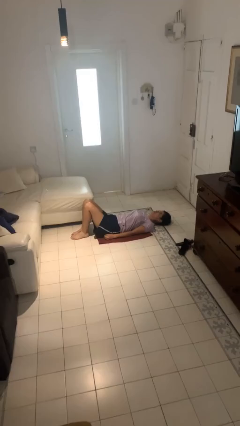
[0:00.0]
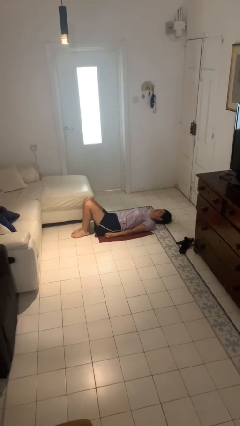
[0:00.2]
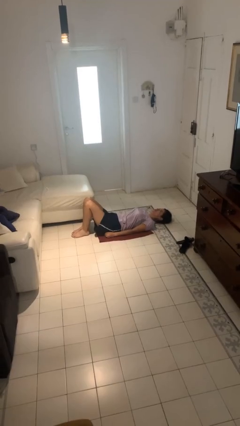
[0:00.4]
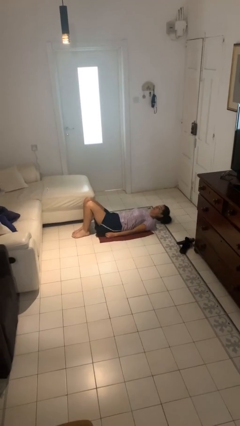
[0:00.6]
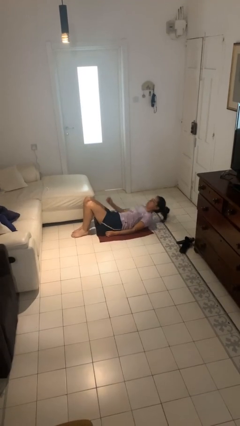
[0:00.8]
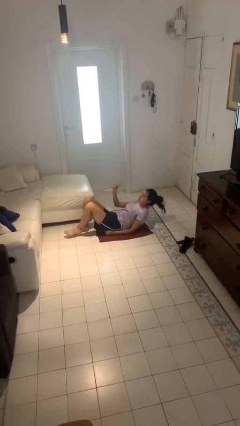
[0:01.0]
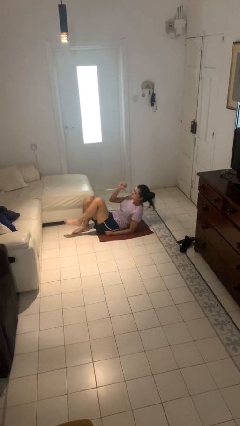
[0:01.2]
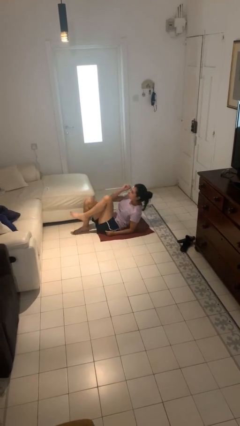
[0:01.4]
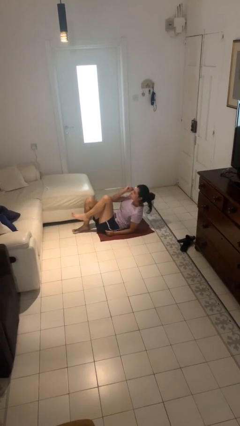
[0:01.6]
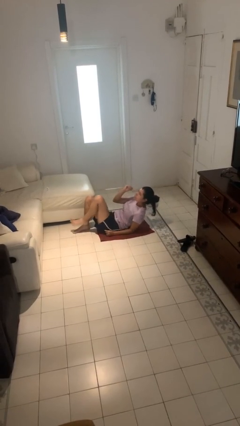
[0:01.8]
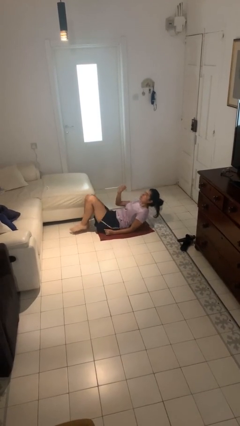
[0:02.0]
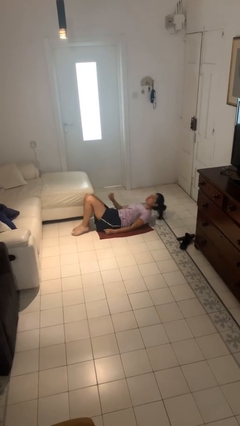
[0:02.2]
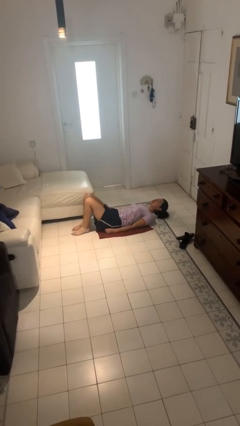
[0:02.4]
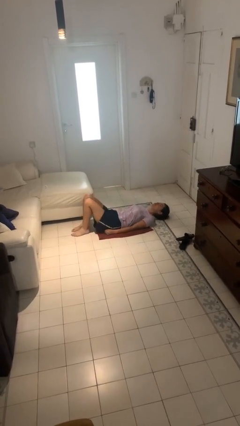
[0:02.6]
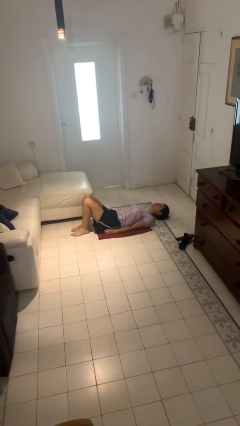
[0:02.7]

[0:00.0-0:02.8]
person exercises with situp

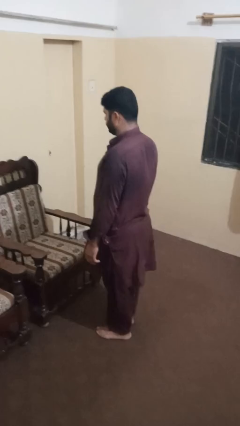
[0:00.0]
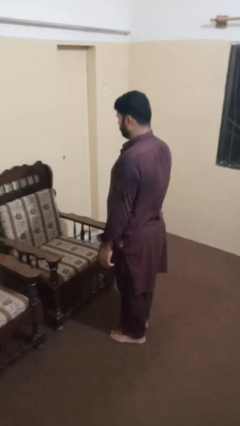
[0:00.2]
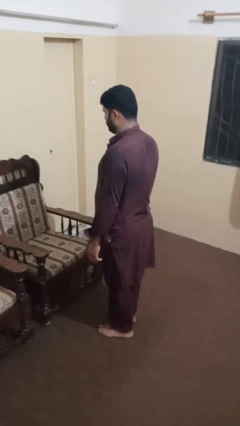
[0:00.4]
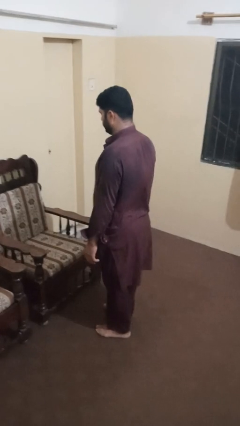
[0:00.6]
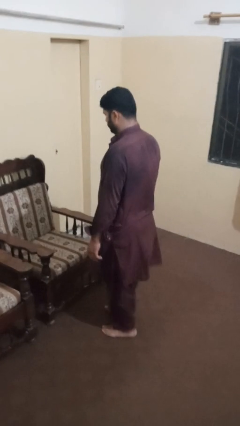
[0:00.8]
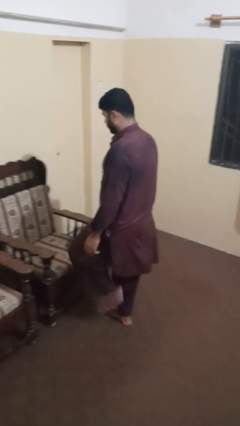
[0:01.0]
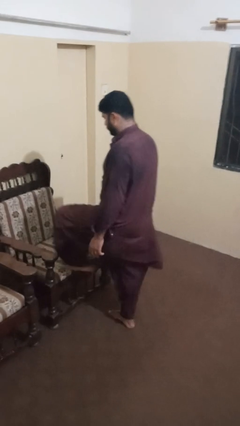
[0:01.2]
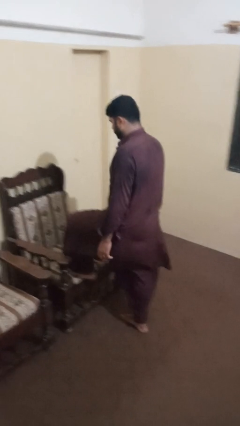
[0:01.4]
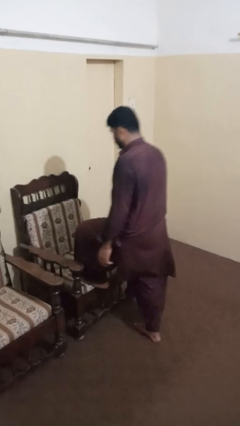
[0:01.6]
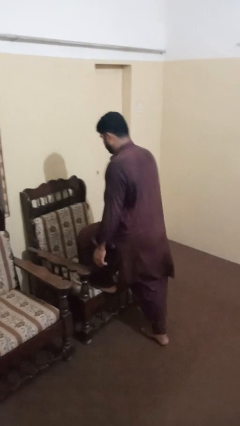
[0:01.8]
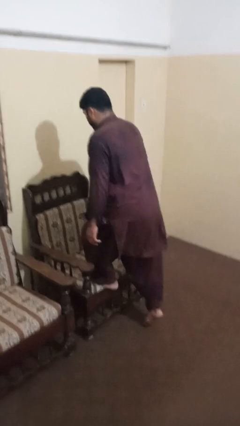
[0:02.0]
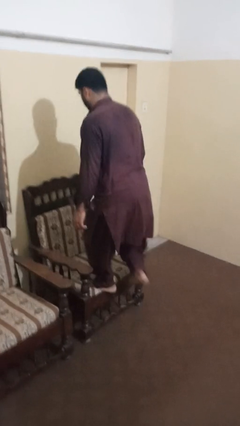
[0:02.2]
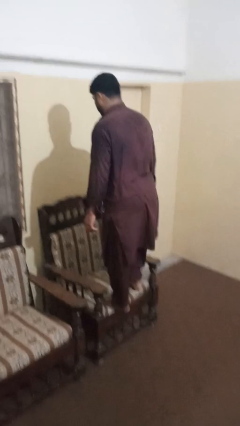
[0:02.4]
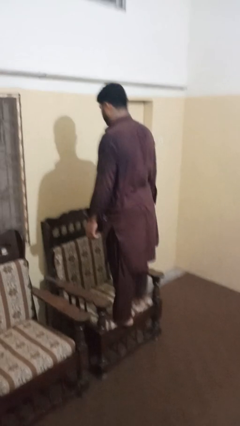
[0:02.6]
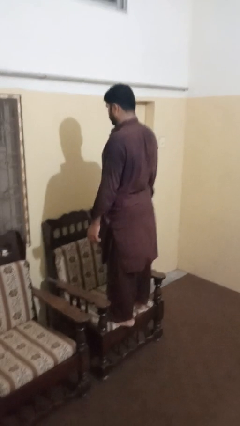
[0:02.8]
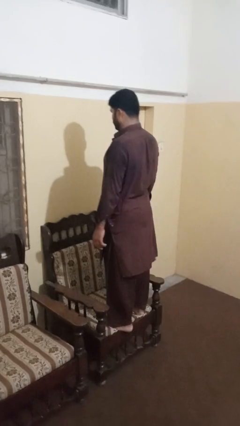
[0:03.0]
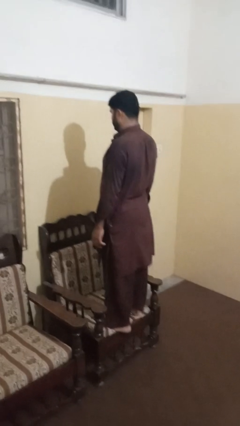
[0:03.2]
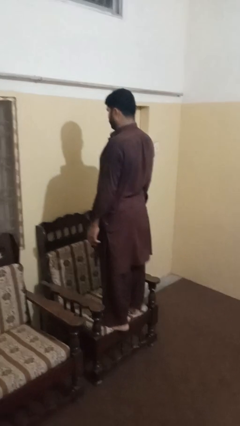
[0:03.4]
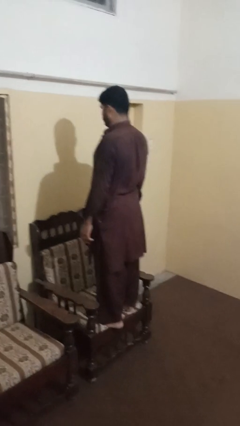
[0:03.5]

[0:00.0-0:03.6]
person climbs on chair

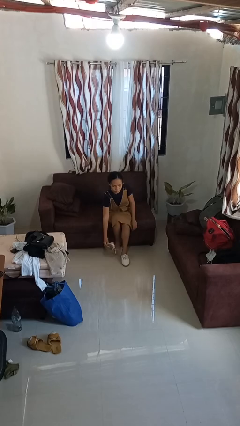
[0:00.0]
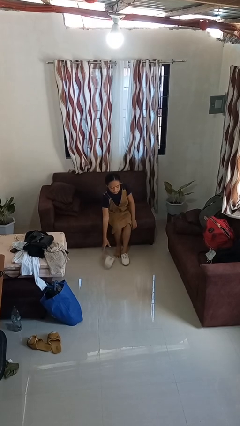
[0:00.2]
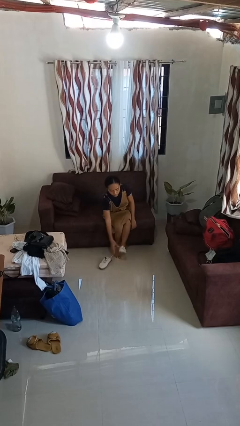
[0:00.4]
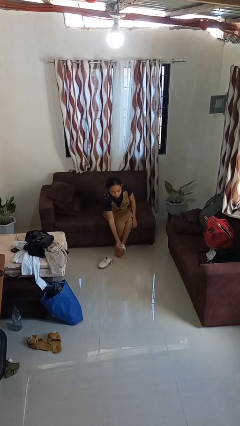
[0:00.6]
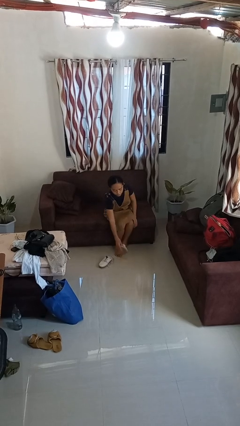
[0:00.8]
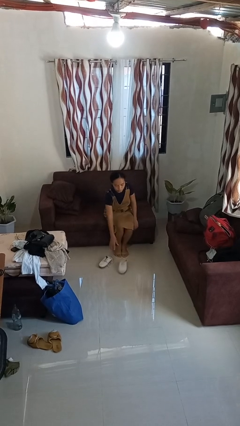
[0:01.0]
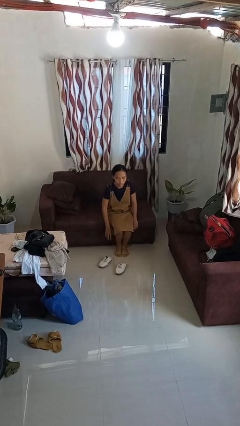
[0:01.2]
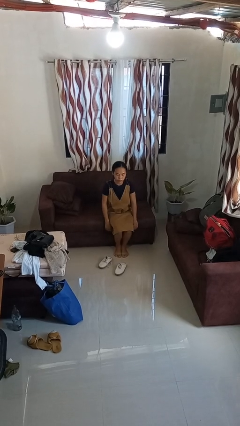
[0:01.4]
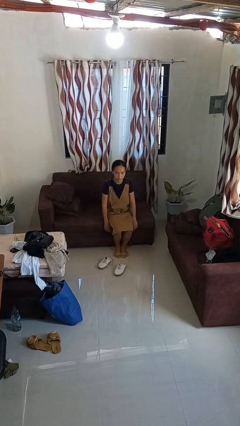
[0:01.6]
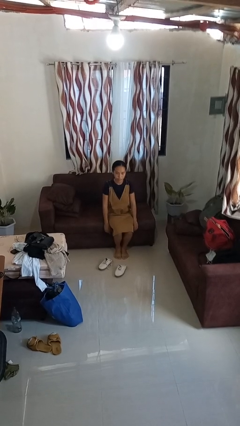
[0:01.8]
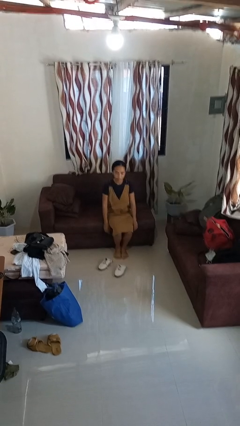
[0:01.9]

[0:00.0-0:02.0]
person takes off shoes

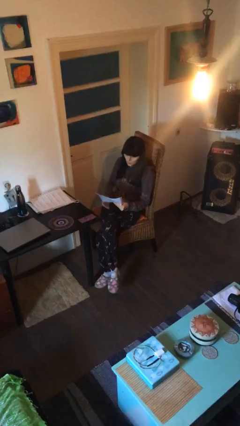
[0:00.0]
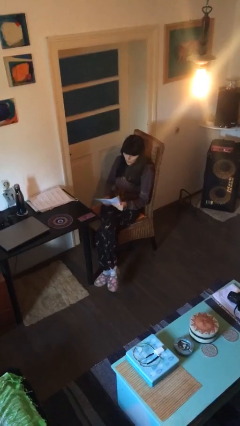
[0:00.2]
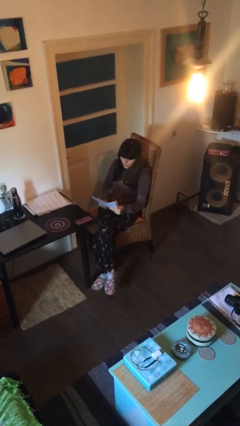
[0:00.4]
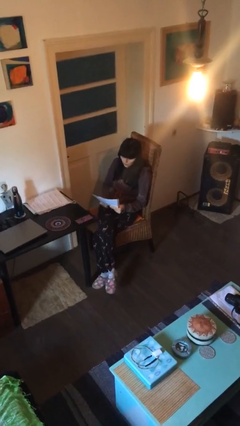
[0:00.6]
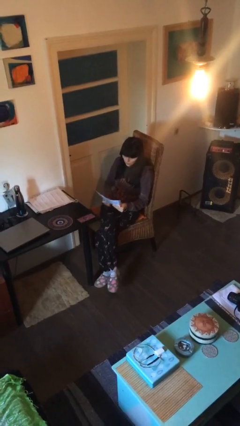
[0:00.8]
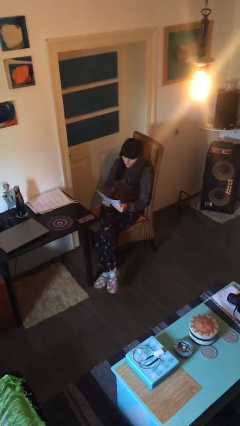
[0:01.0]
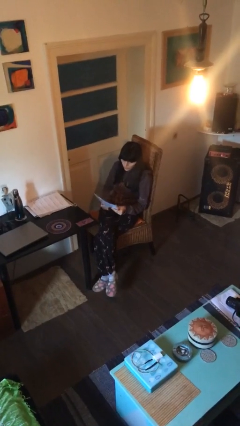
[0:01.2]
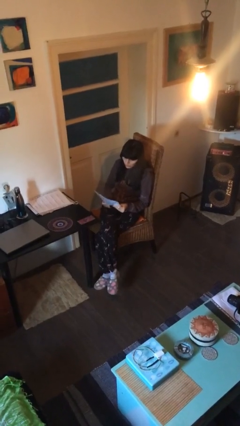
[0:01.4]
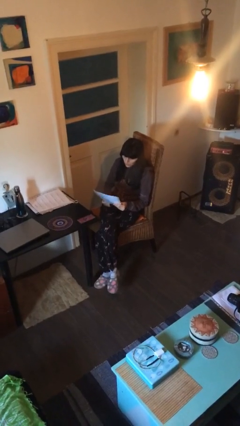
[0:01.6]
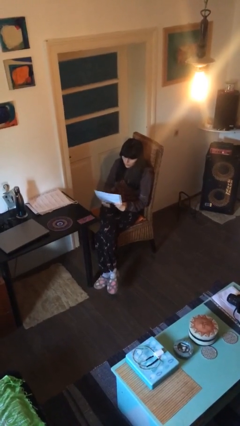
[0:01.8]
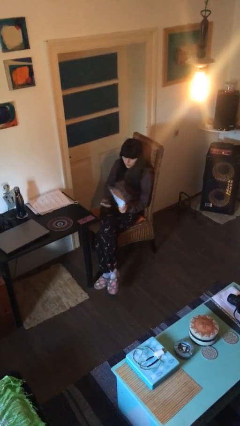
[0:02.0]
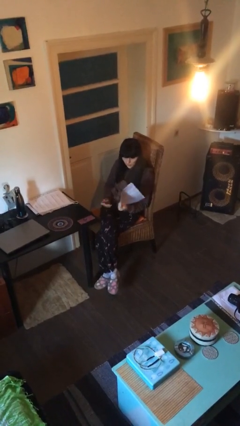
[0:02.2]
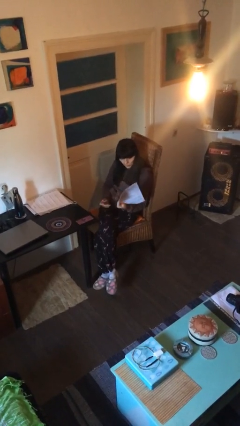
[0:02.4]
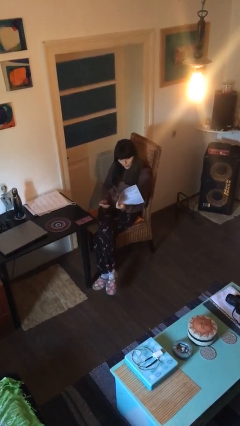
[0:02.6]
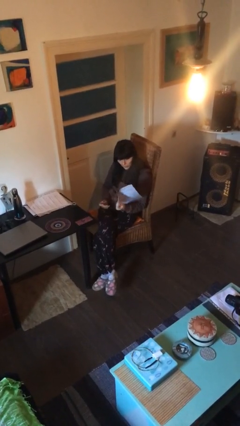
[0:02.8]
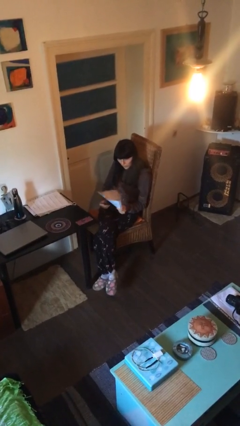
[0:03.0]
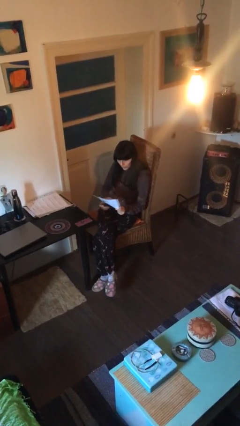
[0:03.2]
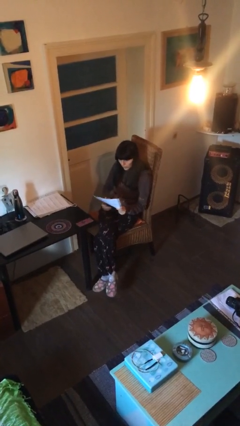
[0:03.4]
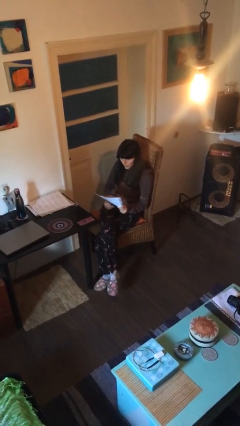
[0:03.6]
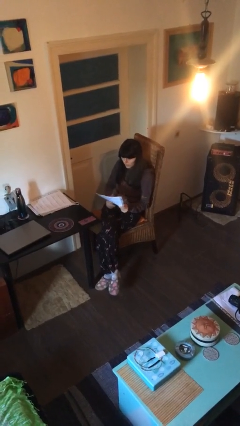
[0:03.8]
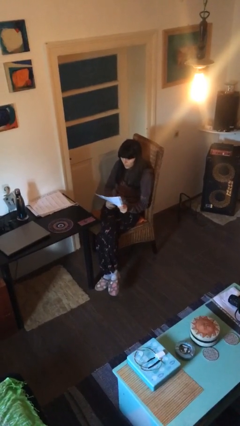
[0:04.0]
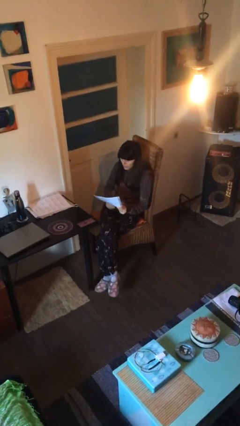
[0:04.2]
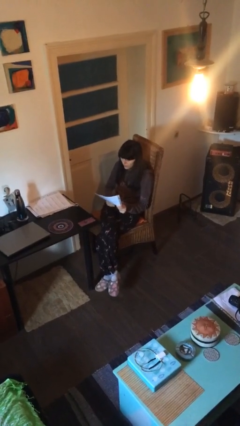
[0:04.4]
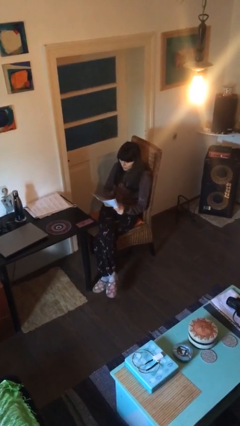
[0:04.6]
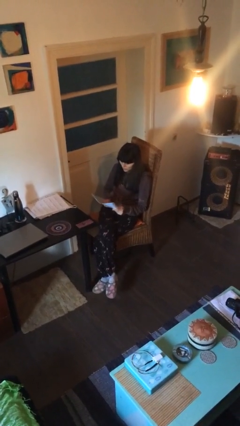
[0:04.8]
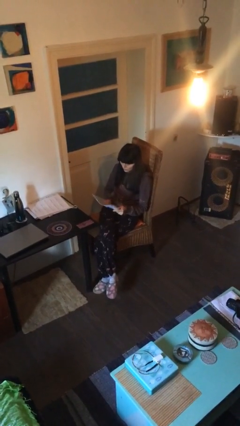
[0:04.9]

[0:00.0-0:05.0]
person reads document

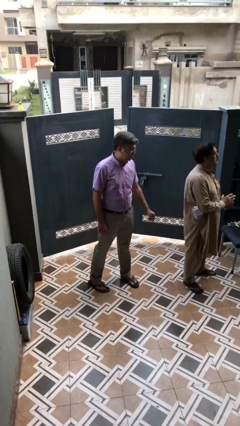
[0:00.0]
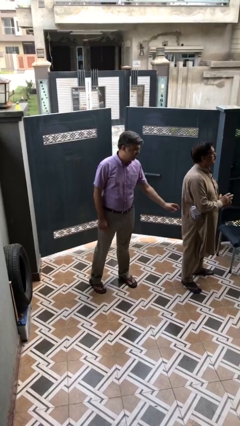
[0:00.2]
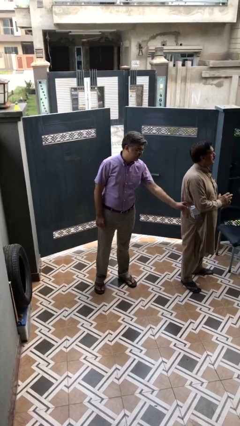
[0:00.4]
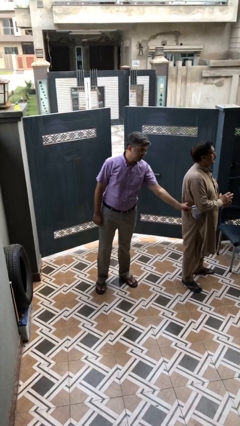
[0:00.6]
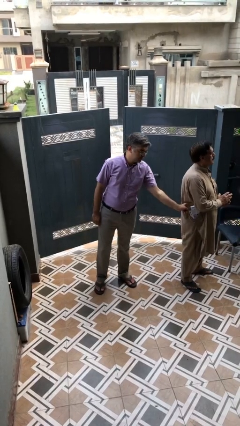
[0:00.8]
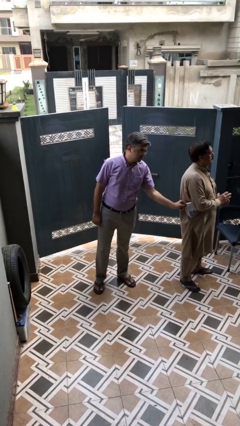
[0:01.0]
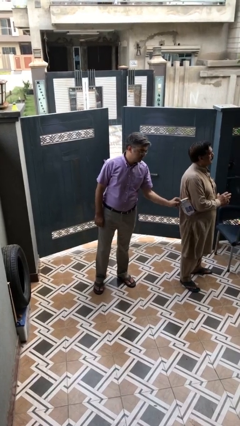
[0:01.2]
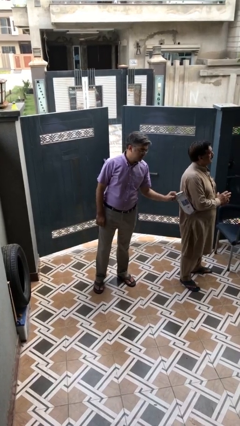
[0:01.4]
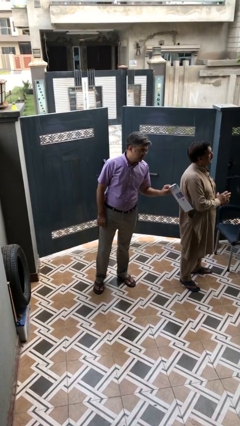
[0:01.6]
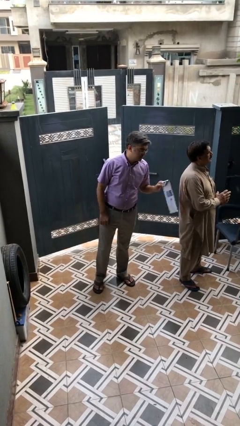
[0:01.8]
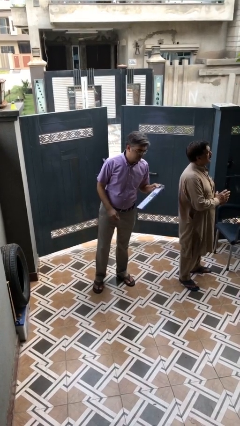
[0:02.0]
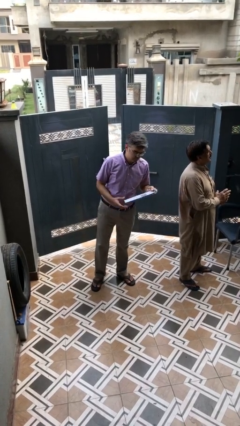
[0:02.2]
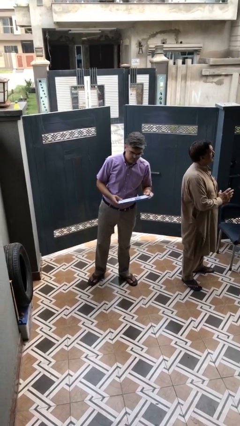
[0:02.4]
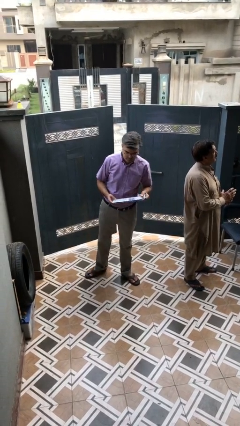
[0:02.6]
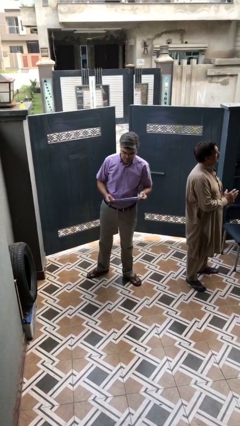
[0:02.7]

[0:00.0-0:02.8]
person steals object from person

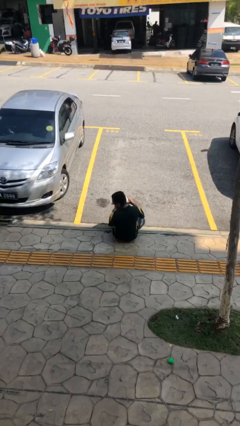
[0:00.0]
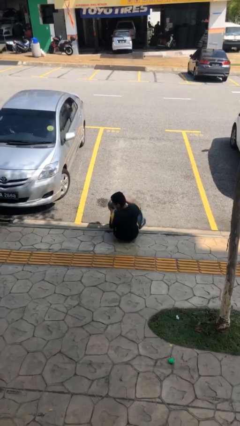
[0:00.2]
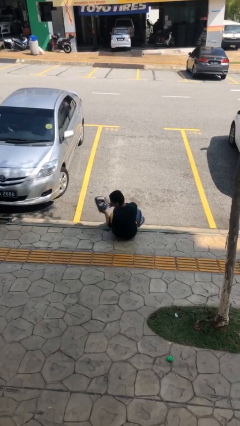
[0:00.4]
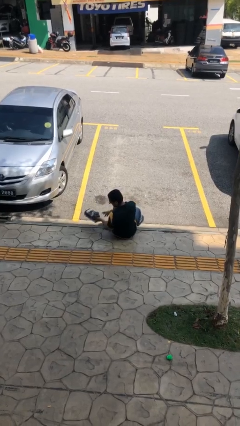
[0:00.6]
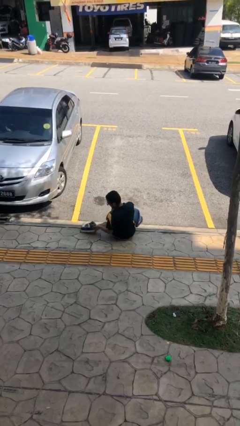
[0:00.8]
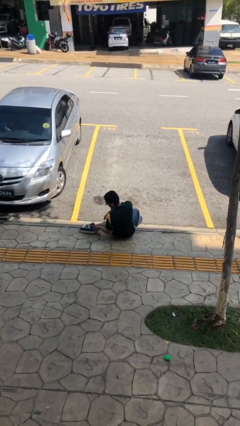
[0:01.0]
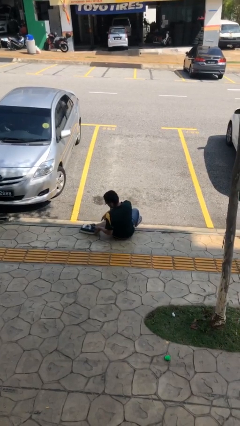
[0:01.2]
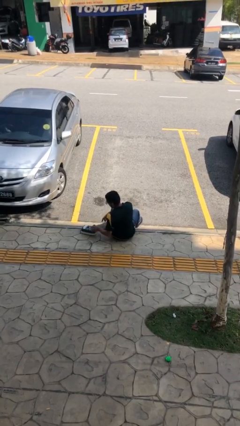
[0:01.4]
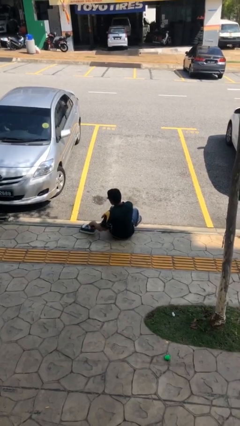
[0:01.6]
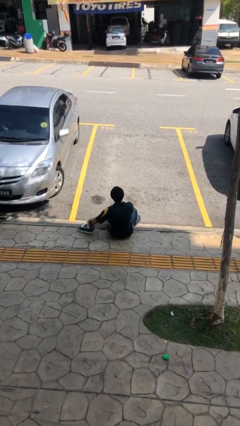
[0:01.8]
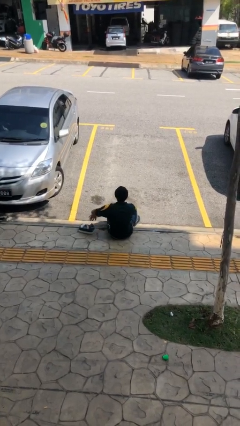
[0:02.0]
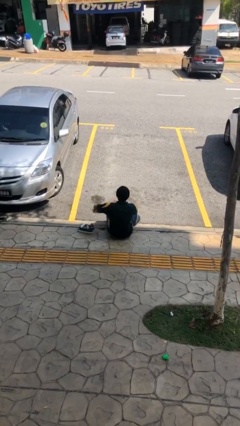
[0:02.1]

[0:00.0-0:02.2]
person puts down object on floor
